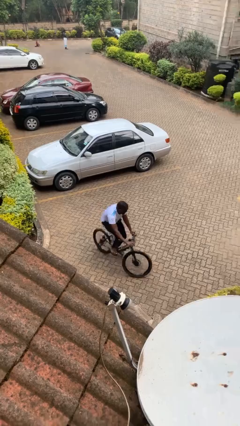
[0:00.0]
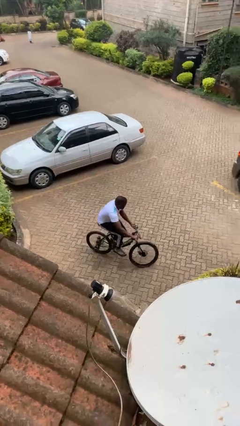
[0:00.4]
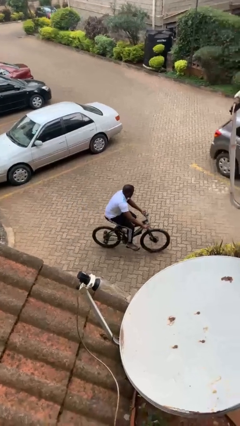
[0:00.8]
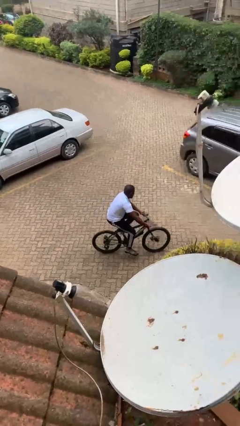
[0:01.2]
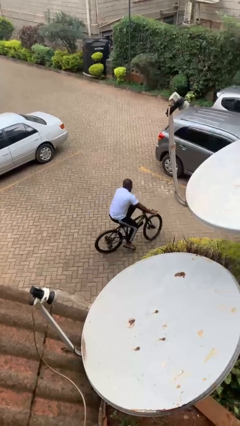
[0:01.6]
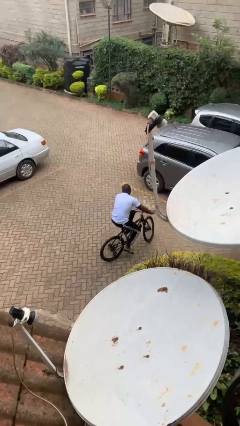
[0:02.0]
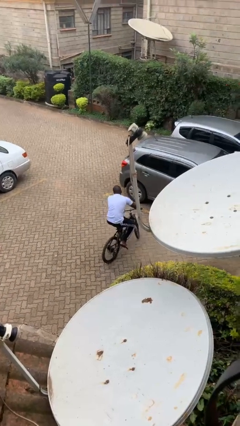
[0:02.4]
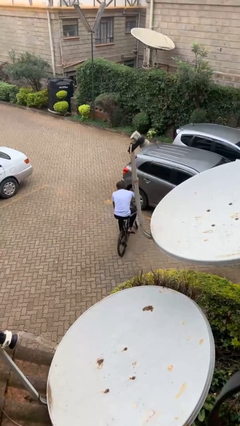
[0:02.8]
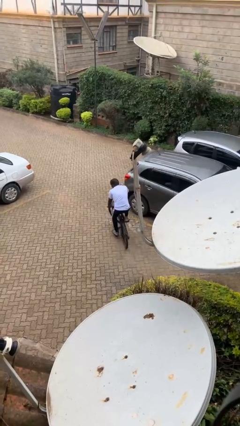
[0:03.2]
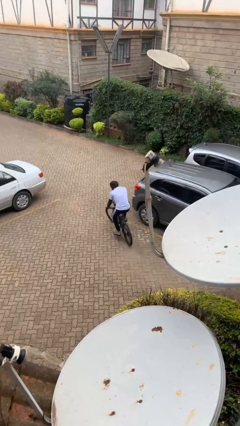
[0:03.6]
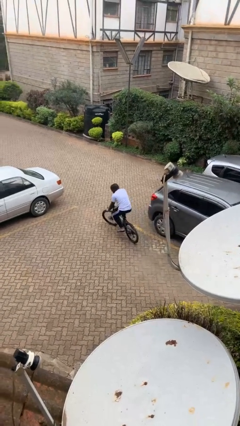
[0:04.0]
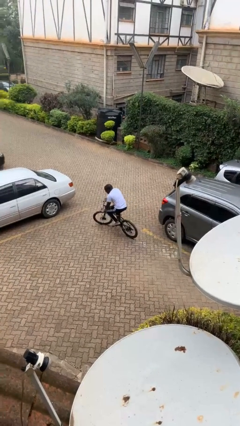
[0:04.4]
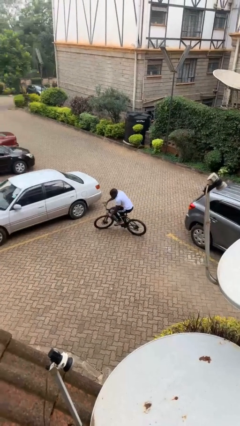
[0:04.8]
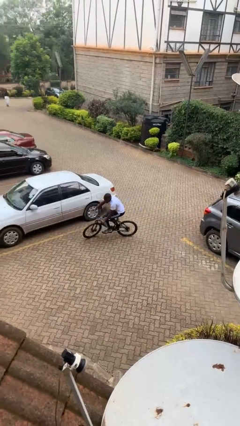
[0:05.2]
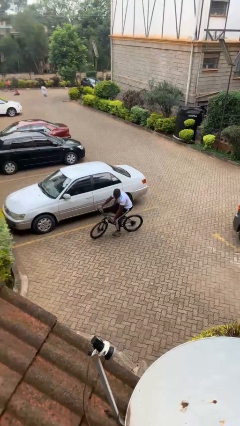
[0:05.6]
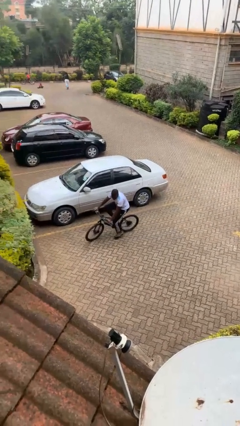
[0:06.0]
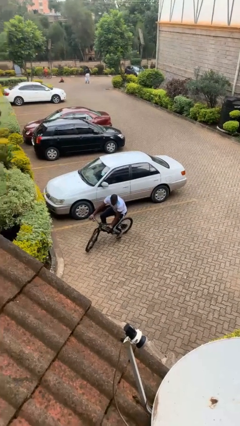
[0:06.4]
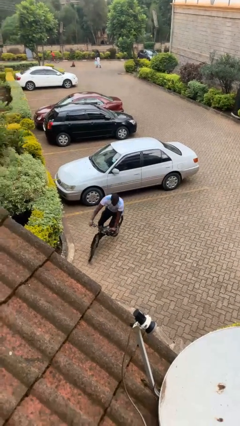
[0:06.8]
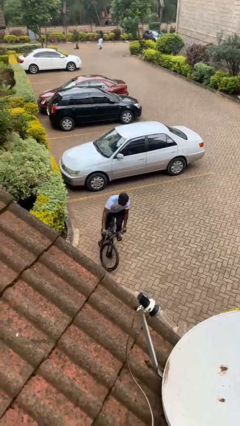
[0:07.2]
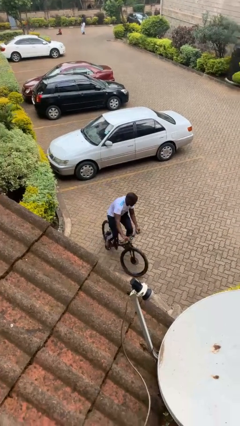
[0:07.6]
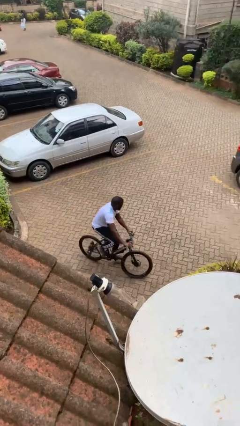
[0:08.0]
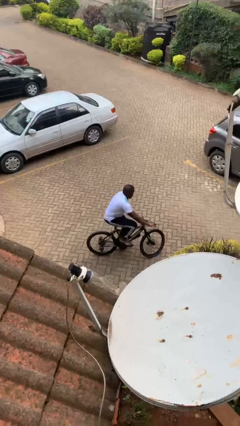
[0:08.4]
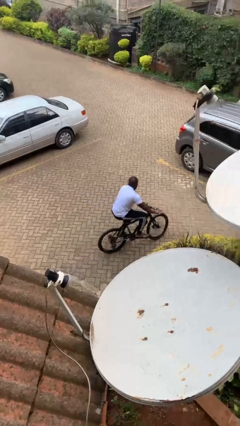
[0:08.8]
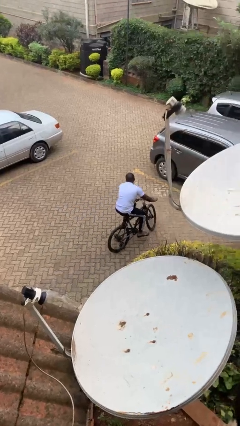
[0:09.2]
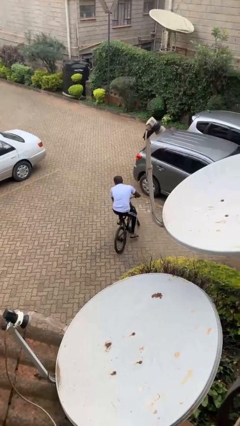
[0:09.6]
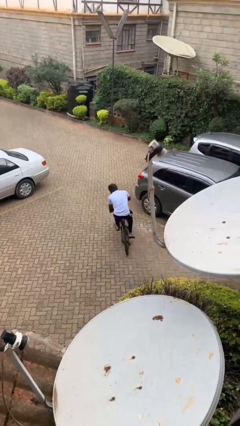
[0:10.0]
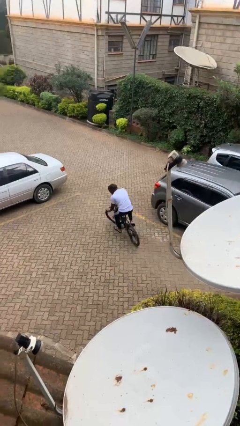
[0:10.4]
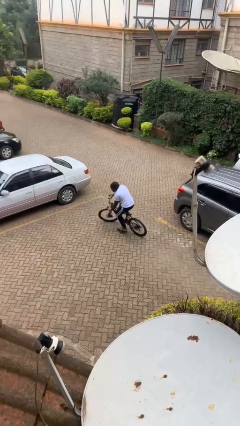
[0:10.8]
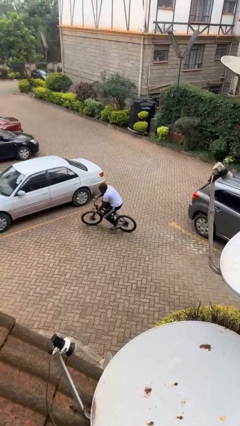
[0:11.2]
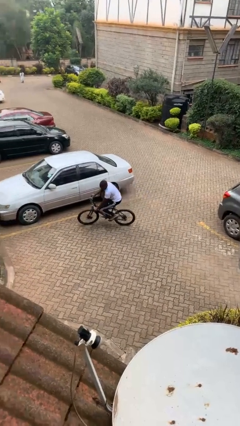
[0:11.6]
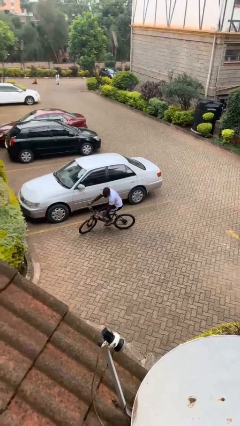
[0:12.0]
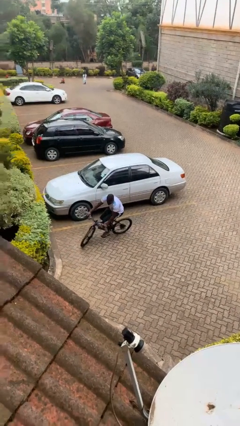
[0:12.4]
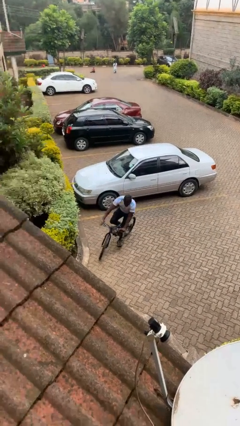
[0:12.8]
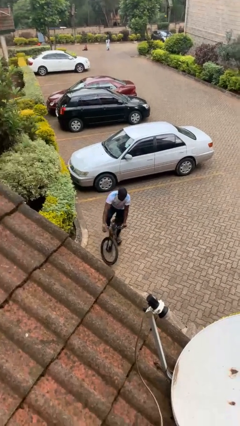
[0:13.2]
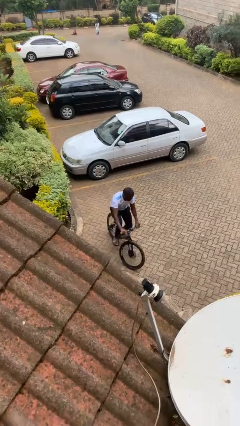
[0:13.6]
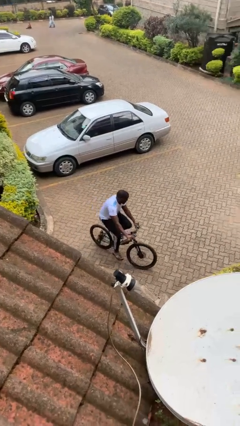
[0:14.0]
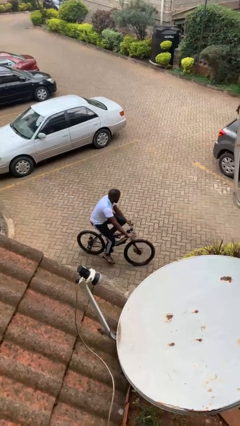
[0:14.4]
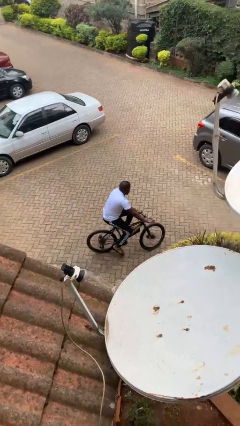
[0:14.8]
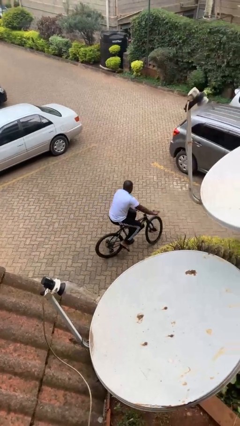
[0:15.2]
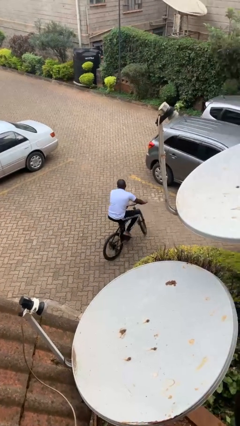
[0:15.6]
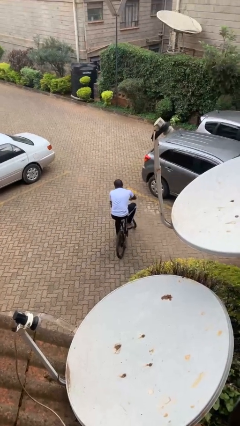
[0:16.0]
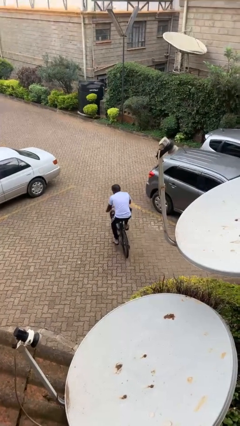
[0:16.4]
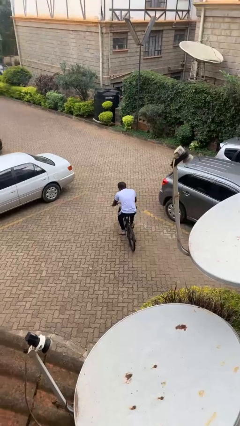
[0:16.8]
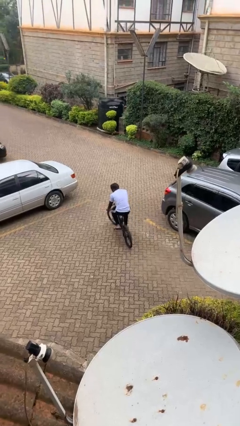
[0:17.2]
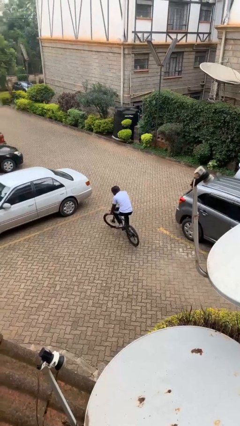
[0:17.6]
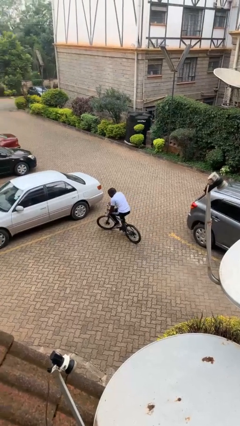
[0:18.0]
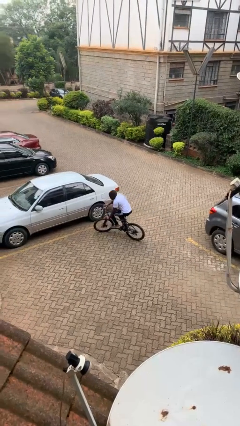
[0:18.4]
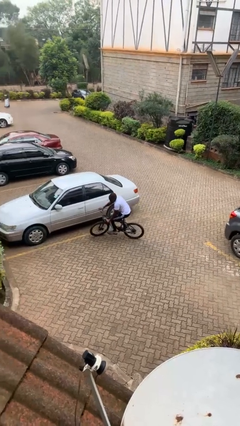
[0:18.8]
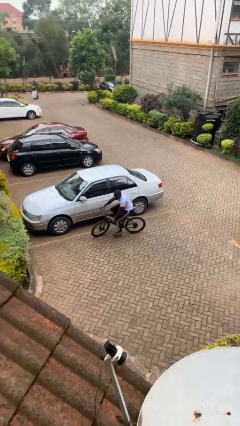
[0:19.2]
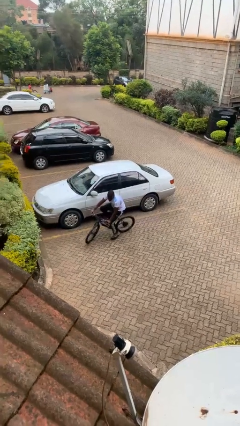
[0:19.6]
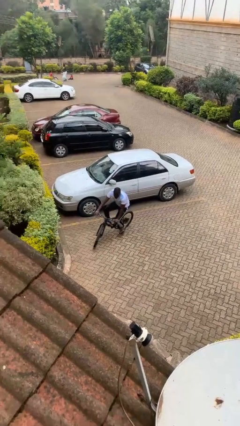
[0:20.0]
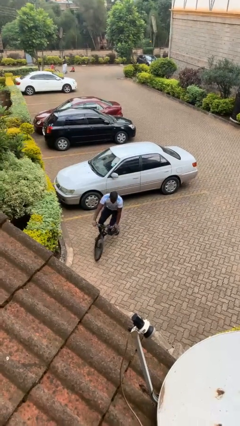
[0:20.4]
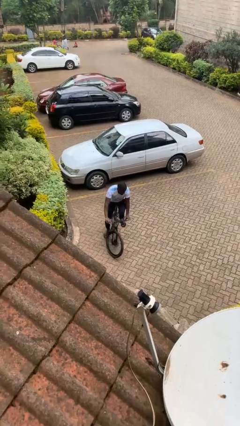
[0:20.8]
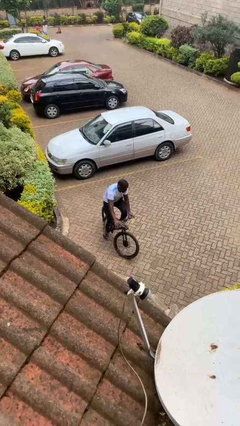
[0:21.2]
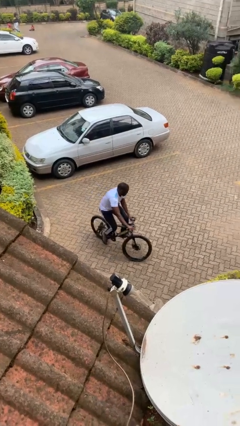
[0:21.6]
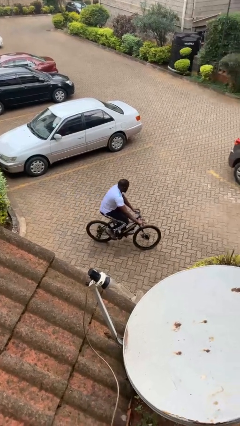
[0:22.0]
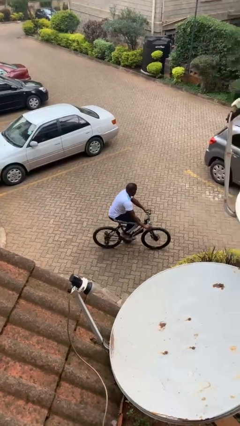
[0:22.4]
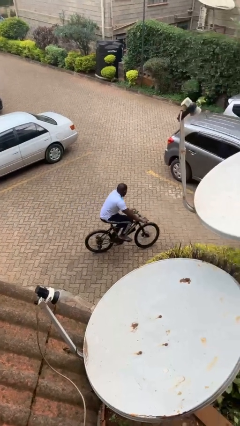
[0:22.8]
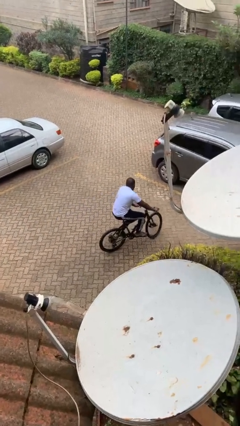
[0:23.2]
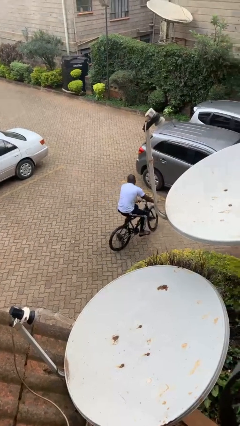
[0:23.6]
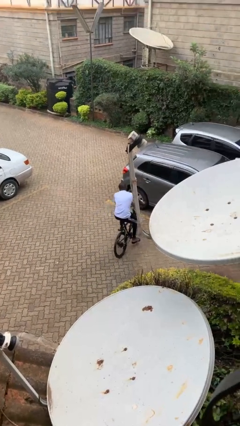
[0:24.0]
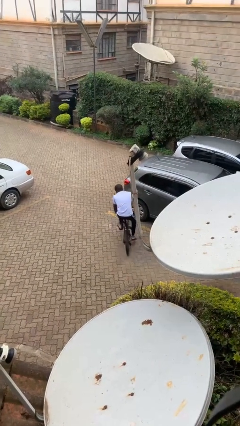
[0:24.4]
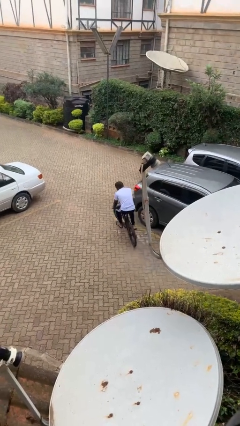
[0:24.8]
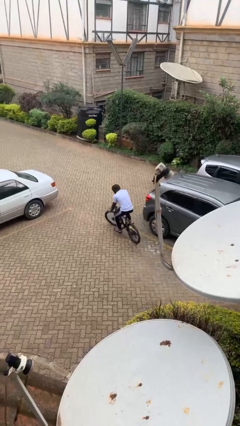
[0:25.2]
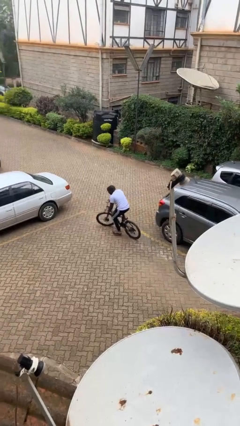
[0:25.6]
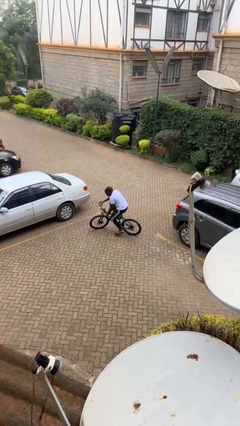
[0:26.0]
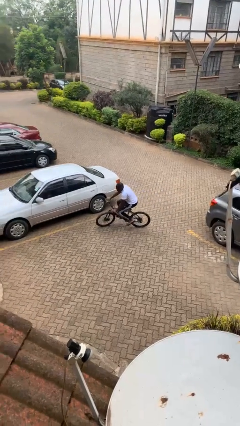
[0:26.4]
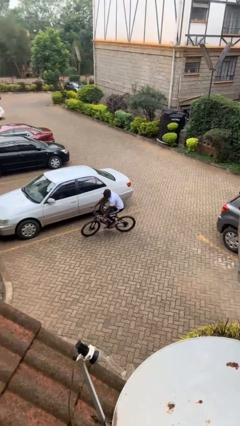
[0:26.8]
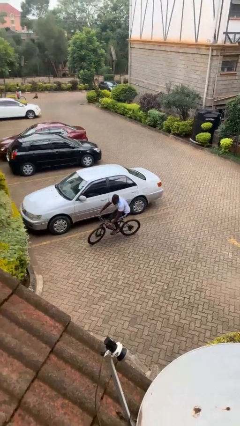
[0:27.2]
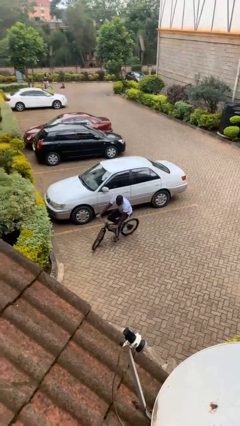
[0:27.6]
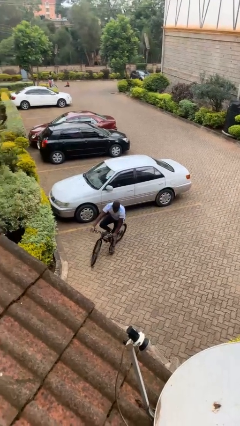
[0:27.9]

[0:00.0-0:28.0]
person rides bicycle

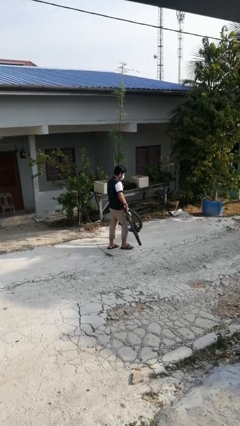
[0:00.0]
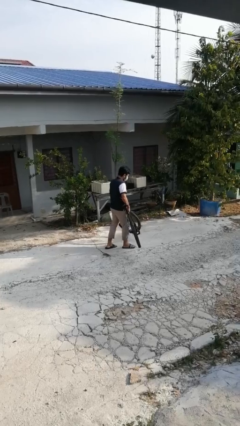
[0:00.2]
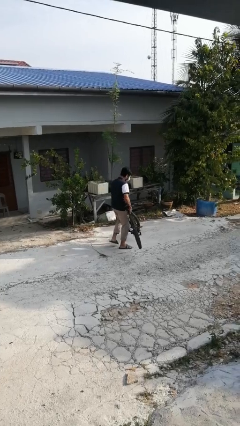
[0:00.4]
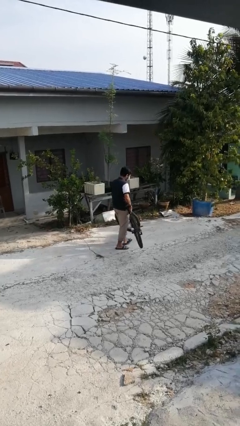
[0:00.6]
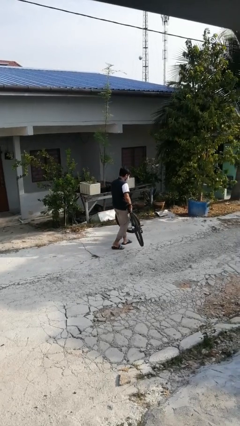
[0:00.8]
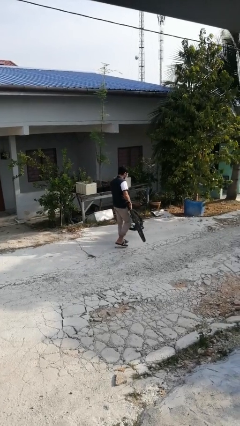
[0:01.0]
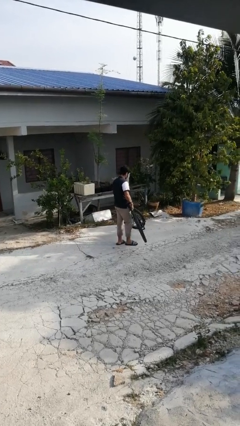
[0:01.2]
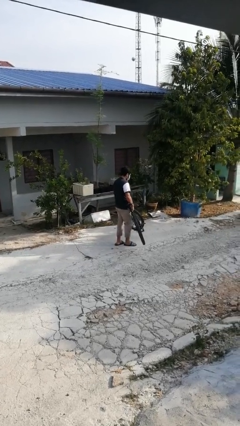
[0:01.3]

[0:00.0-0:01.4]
person carries bicycle

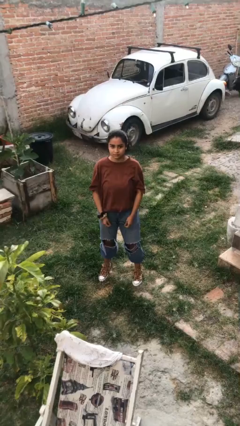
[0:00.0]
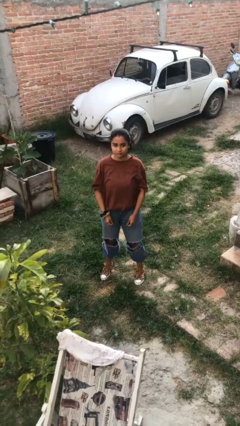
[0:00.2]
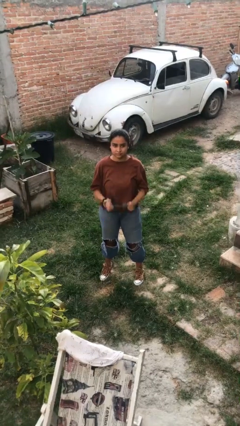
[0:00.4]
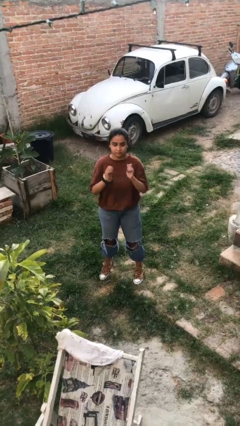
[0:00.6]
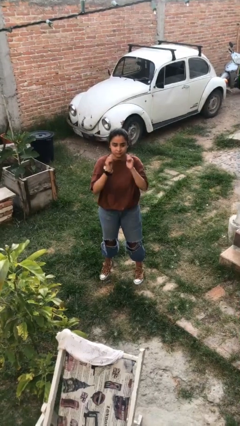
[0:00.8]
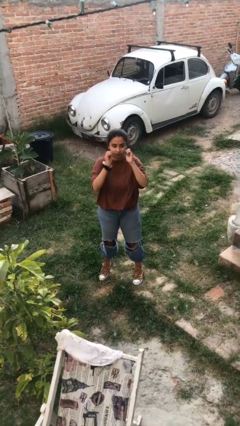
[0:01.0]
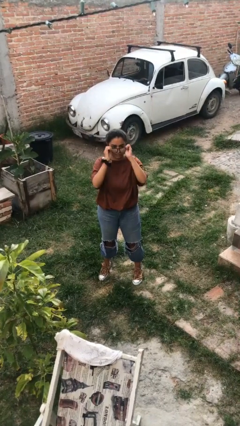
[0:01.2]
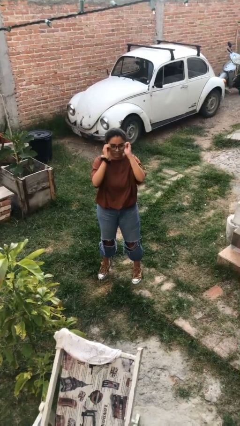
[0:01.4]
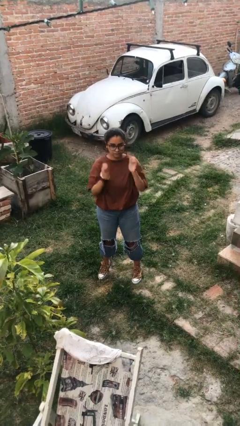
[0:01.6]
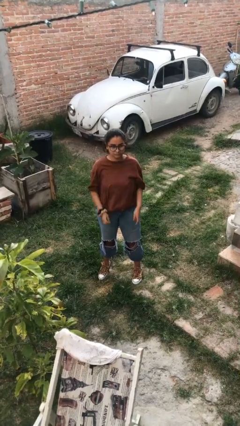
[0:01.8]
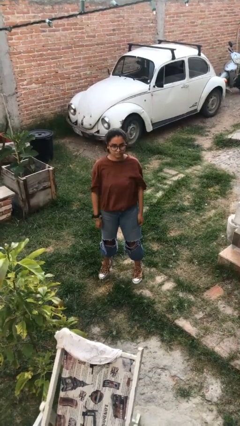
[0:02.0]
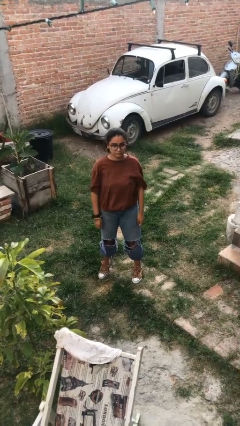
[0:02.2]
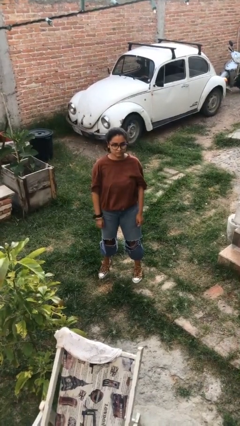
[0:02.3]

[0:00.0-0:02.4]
person puts on glasses
